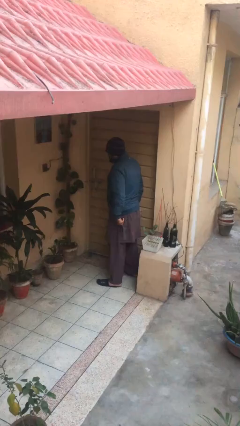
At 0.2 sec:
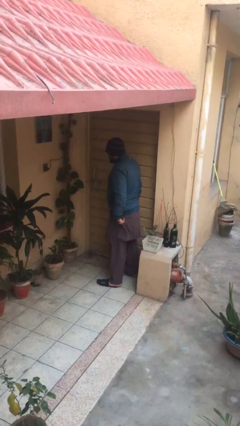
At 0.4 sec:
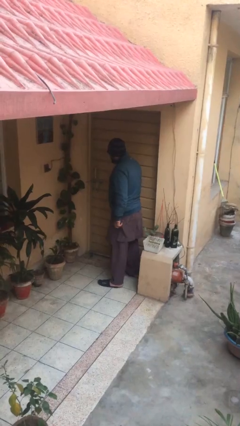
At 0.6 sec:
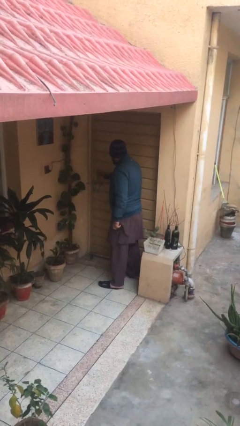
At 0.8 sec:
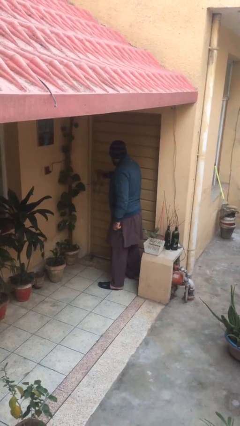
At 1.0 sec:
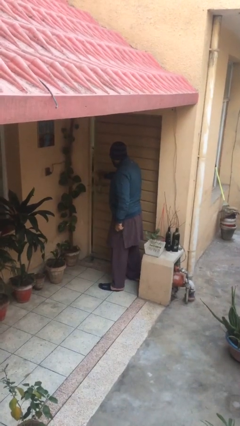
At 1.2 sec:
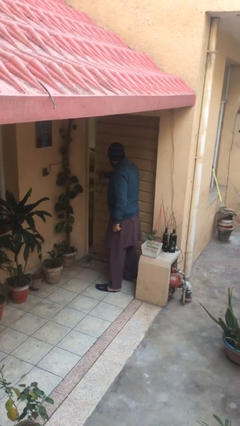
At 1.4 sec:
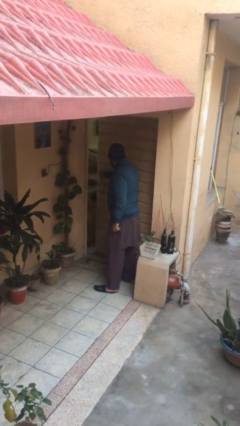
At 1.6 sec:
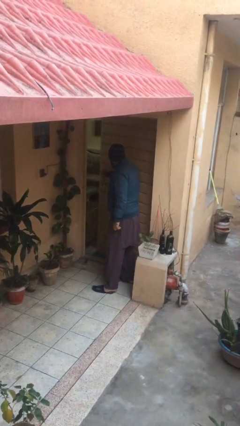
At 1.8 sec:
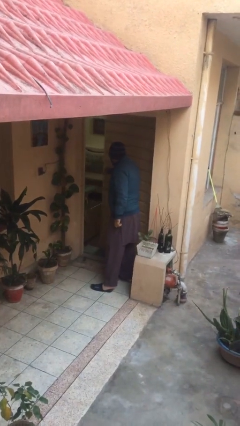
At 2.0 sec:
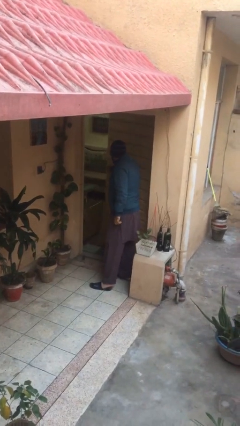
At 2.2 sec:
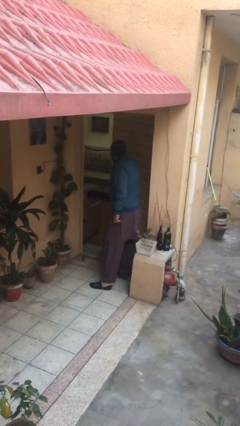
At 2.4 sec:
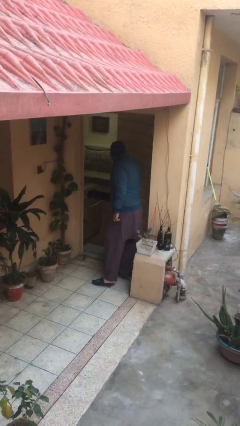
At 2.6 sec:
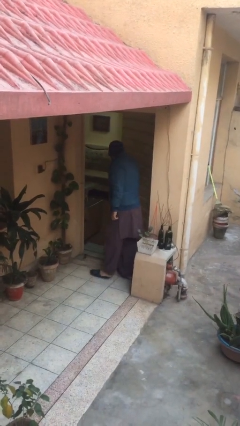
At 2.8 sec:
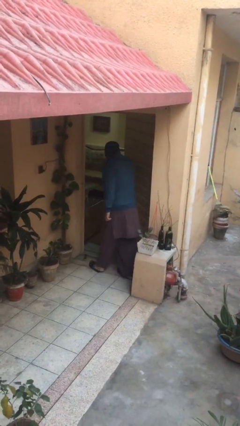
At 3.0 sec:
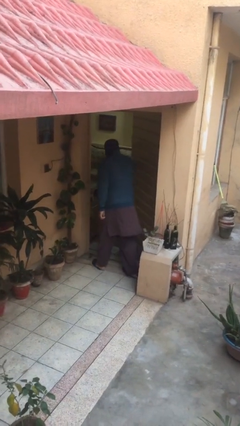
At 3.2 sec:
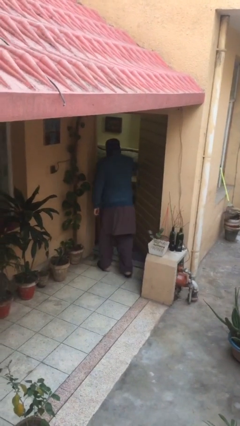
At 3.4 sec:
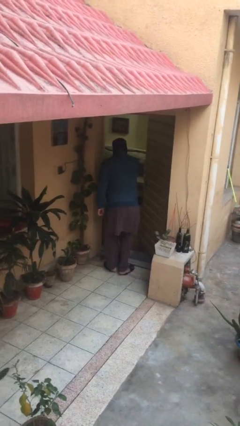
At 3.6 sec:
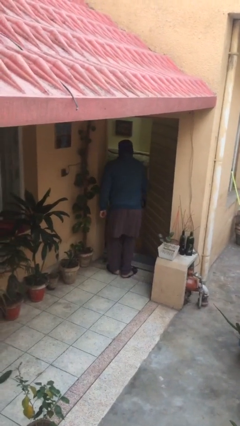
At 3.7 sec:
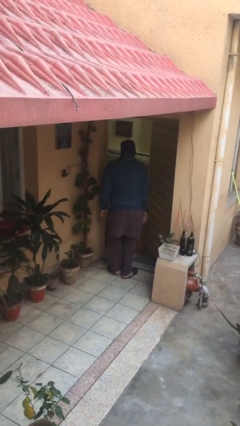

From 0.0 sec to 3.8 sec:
person opens facility door

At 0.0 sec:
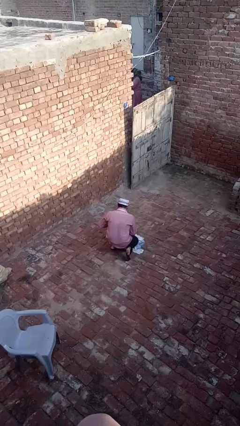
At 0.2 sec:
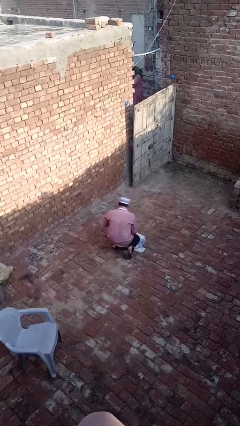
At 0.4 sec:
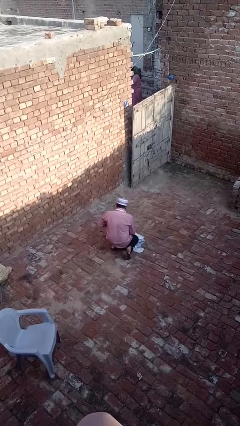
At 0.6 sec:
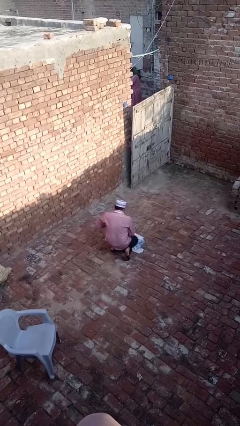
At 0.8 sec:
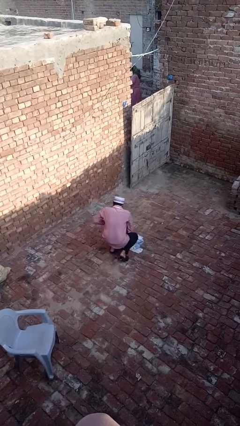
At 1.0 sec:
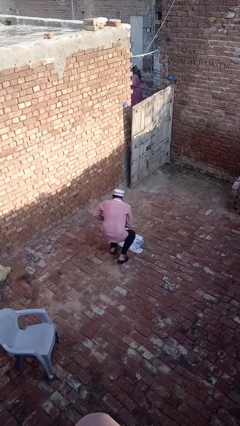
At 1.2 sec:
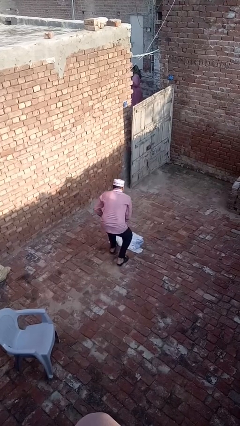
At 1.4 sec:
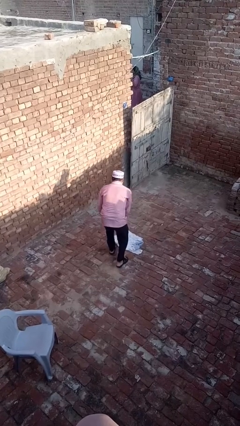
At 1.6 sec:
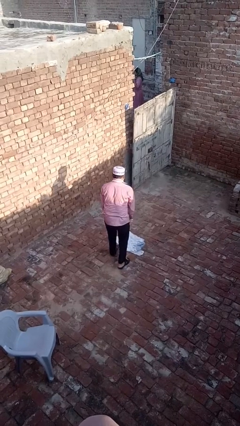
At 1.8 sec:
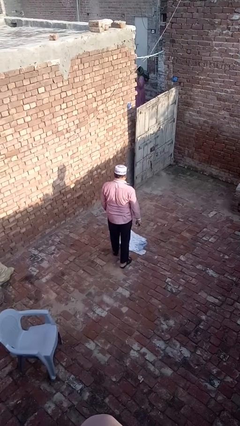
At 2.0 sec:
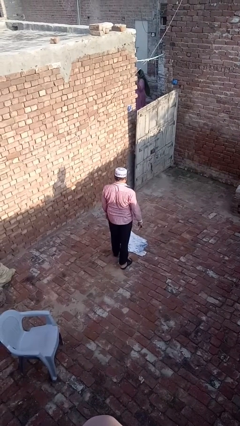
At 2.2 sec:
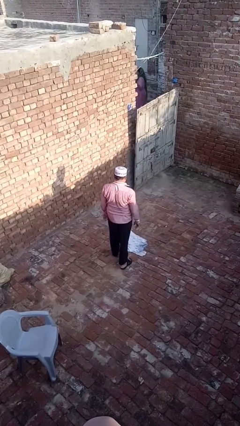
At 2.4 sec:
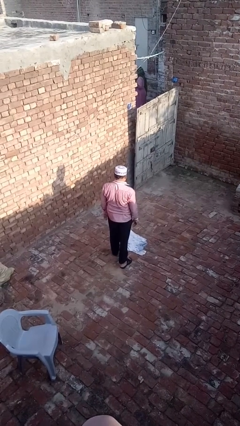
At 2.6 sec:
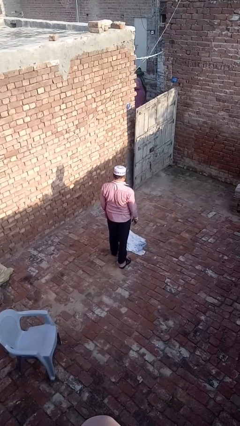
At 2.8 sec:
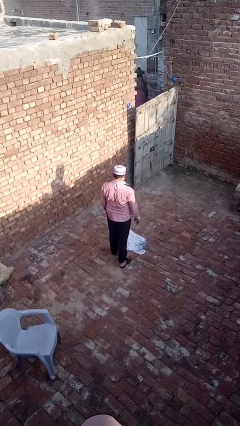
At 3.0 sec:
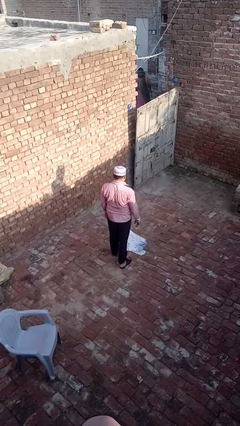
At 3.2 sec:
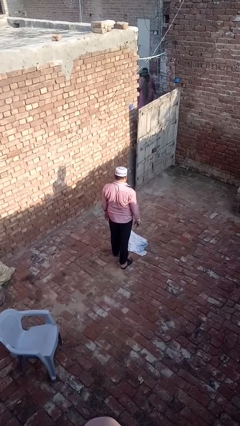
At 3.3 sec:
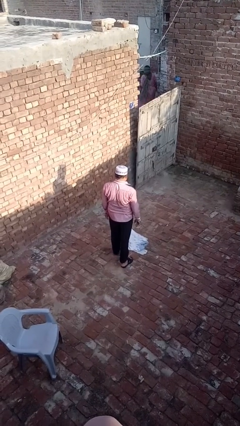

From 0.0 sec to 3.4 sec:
person stands up from floor

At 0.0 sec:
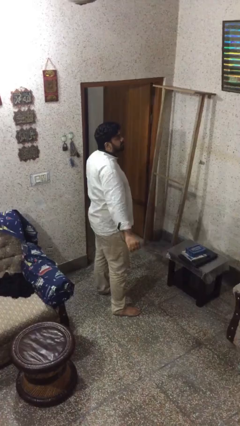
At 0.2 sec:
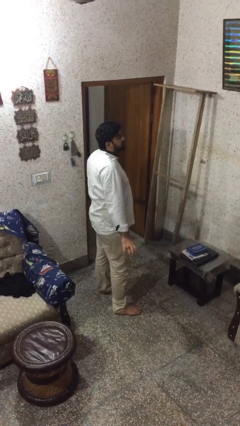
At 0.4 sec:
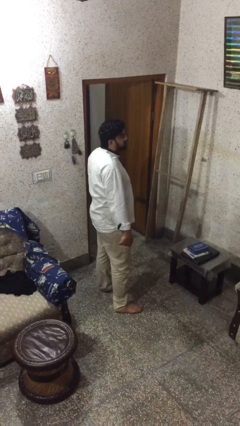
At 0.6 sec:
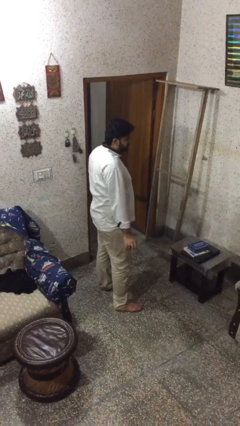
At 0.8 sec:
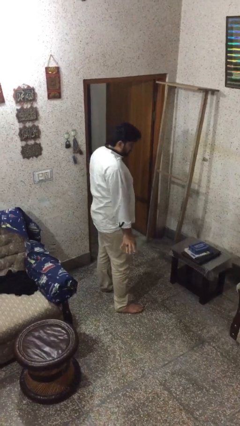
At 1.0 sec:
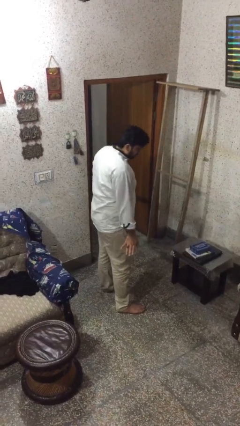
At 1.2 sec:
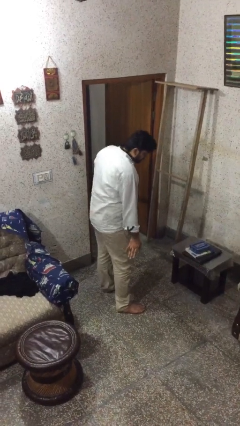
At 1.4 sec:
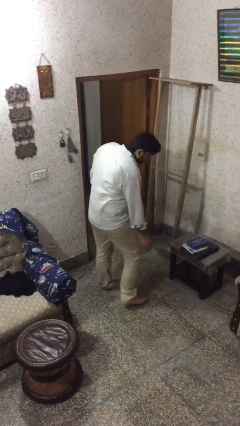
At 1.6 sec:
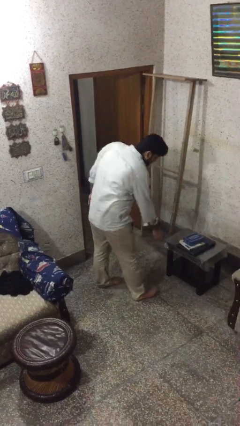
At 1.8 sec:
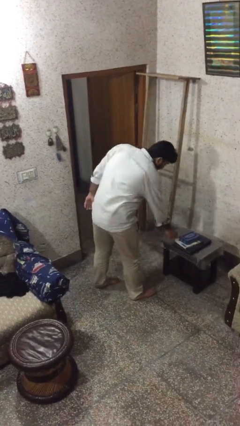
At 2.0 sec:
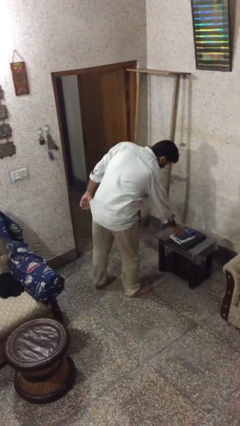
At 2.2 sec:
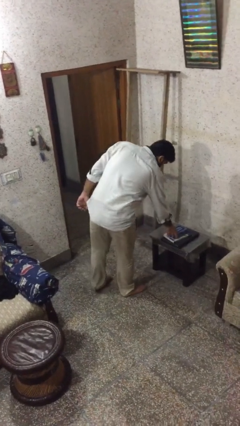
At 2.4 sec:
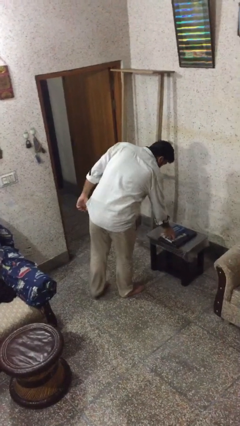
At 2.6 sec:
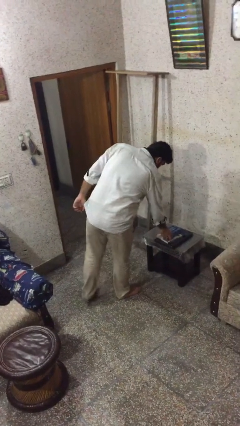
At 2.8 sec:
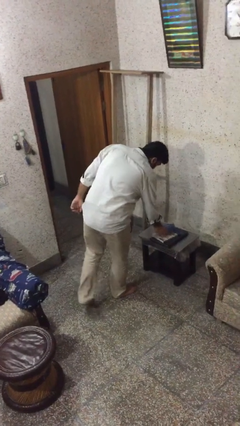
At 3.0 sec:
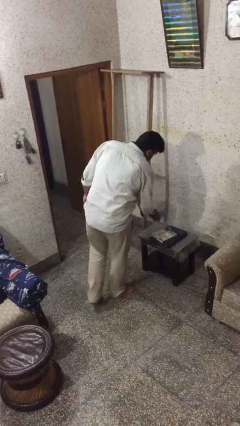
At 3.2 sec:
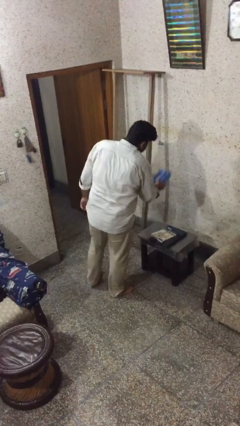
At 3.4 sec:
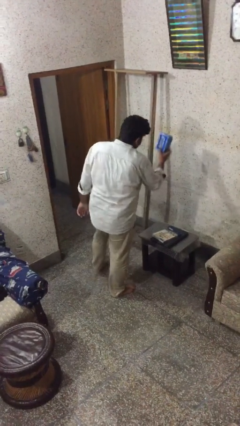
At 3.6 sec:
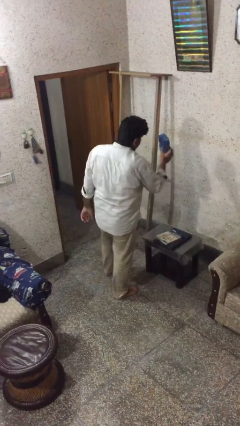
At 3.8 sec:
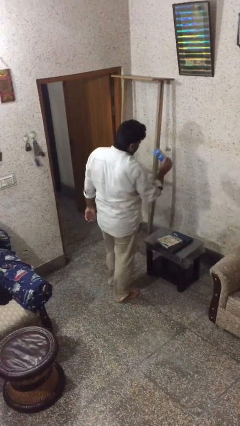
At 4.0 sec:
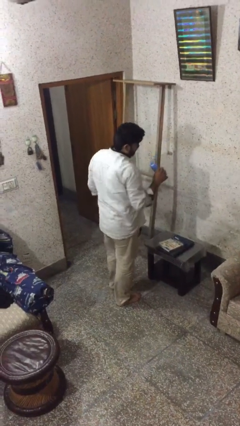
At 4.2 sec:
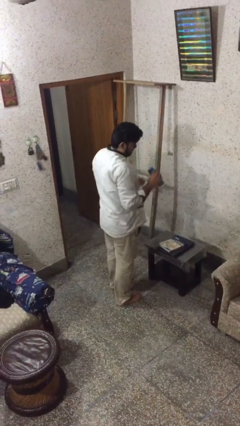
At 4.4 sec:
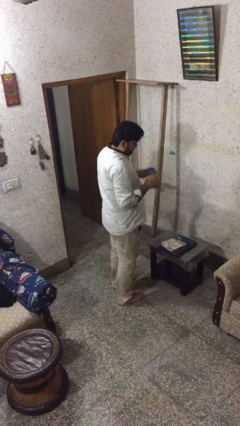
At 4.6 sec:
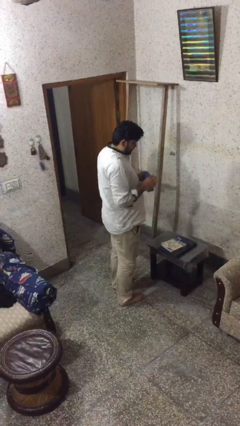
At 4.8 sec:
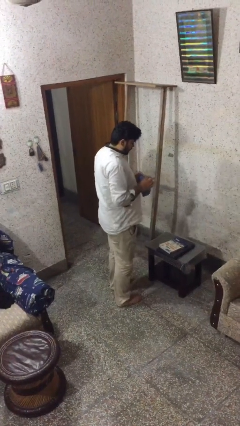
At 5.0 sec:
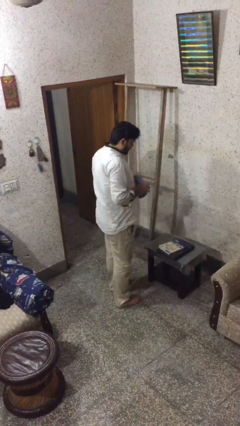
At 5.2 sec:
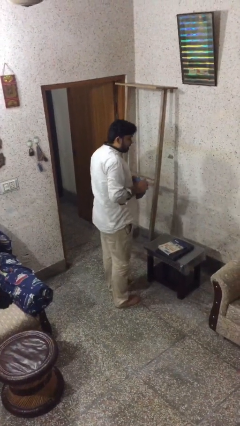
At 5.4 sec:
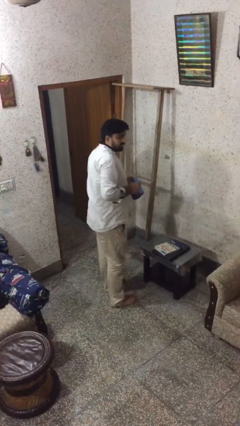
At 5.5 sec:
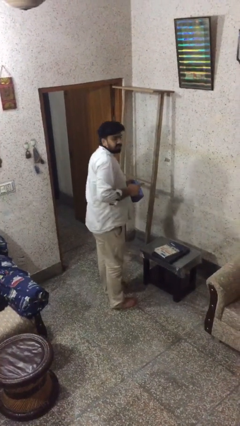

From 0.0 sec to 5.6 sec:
person picks up object from table

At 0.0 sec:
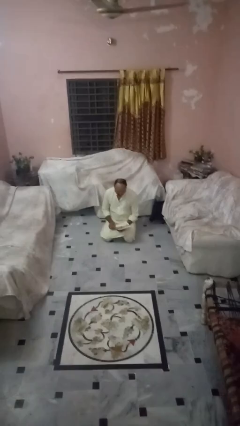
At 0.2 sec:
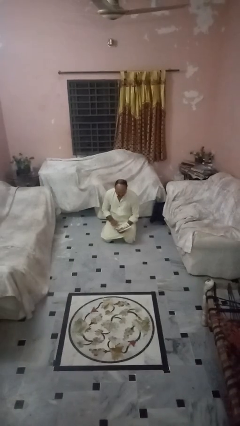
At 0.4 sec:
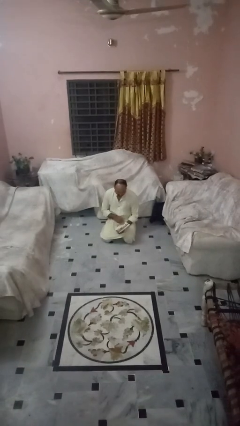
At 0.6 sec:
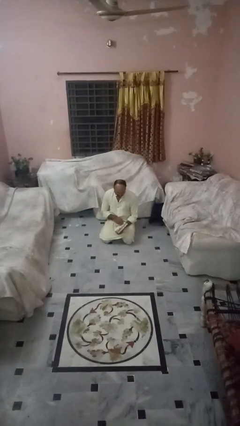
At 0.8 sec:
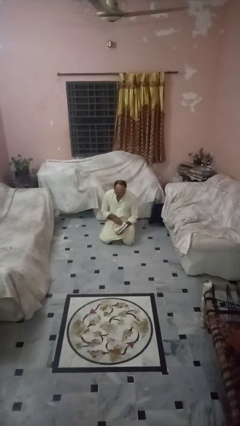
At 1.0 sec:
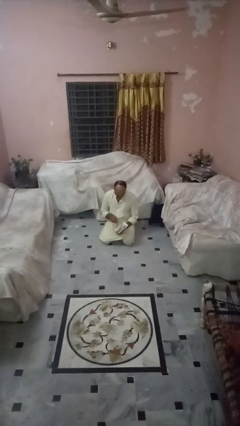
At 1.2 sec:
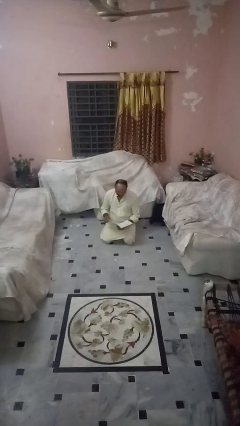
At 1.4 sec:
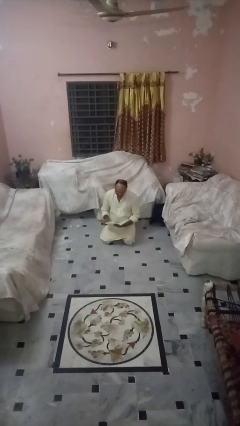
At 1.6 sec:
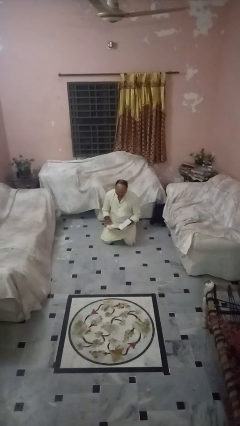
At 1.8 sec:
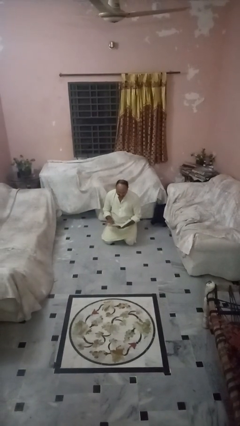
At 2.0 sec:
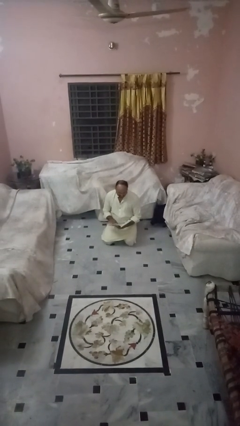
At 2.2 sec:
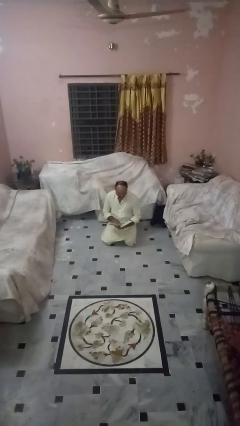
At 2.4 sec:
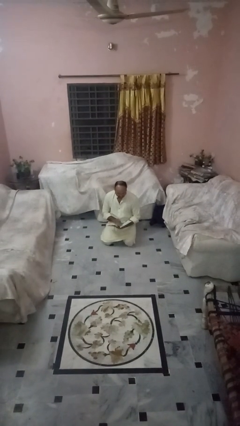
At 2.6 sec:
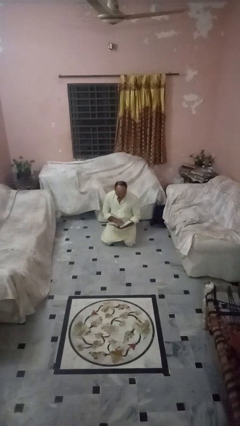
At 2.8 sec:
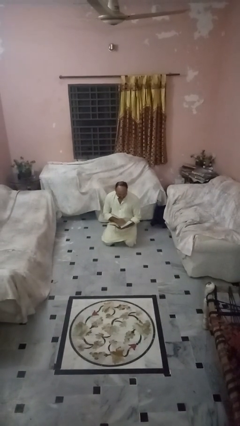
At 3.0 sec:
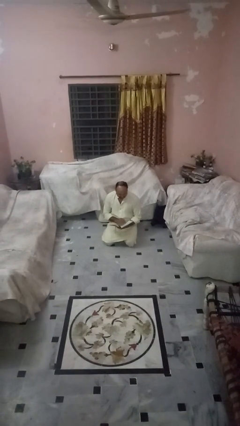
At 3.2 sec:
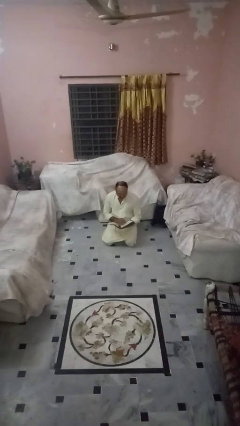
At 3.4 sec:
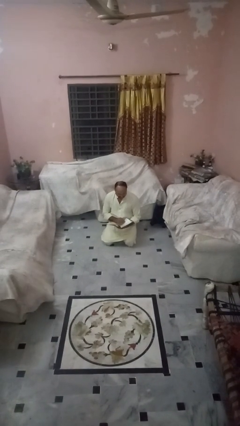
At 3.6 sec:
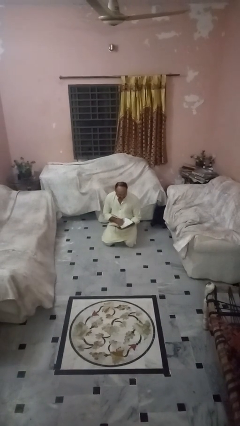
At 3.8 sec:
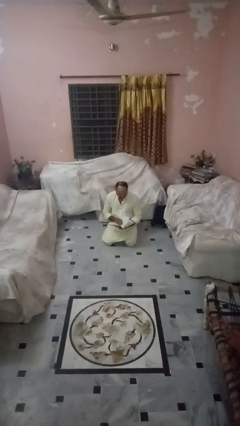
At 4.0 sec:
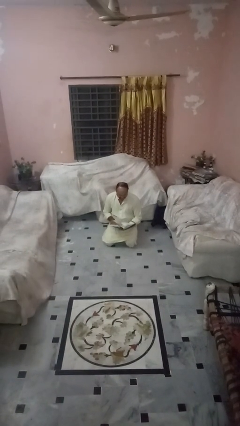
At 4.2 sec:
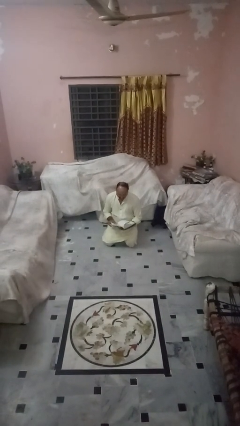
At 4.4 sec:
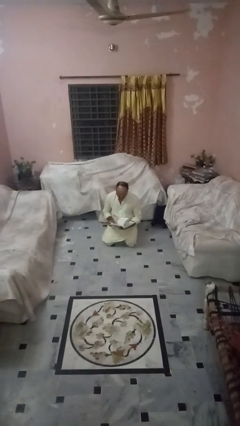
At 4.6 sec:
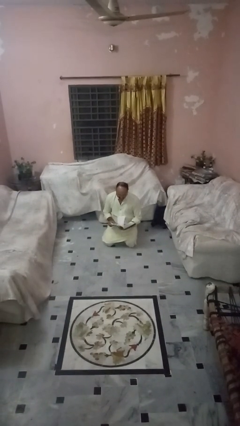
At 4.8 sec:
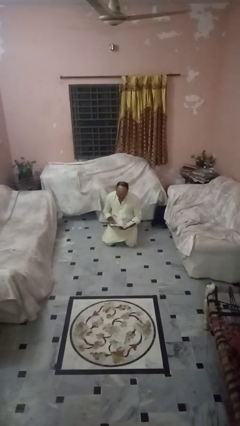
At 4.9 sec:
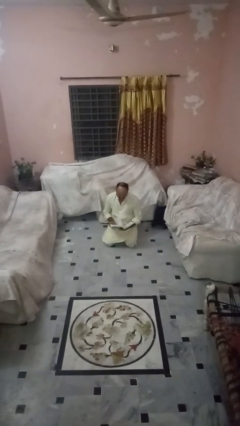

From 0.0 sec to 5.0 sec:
person reads magazine
